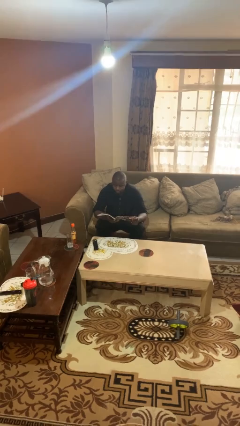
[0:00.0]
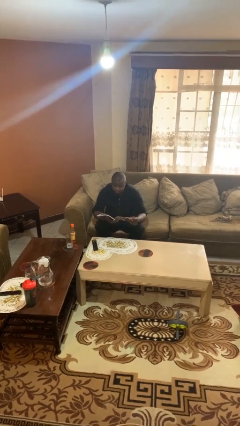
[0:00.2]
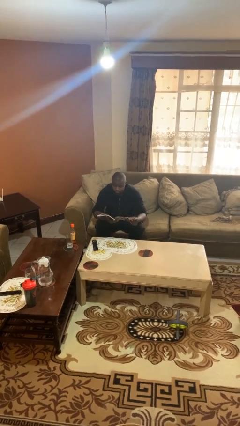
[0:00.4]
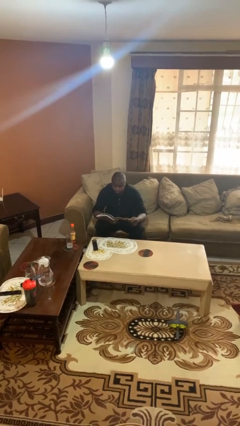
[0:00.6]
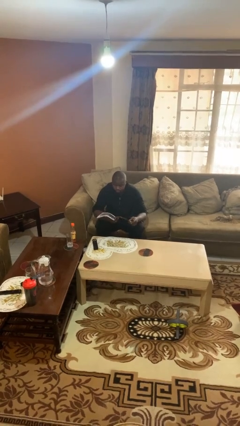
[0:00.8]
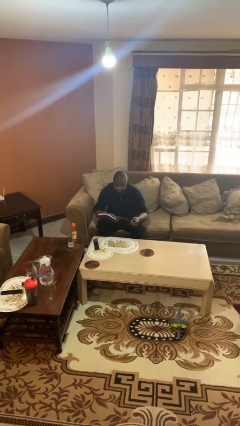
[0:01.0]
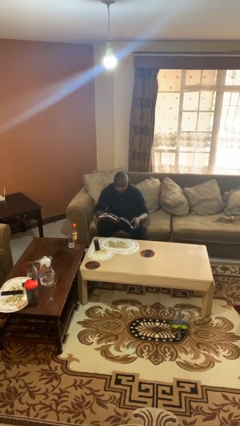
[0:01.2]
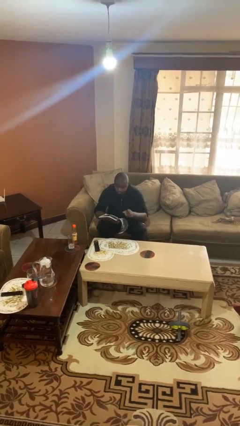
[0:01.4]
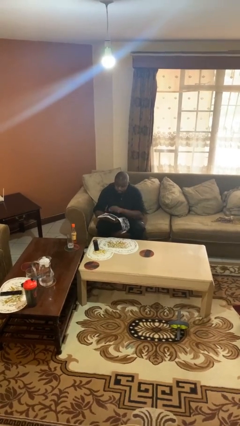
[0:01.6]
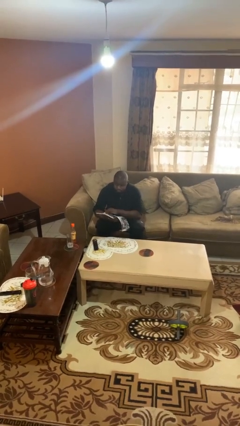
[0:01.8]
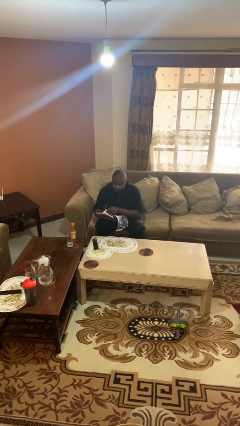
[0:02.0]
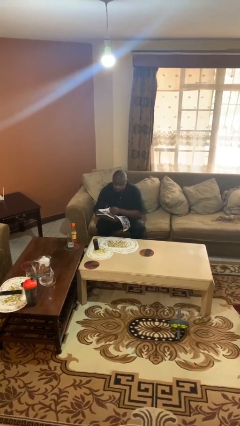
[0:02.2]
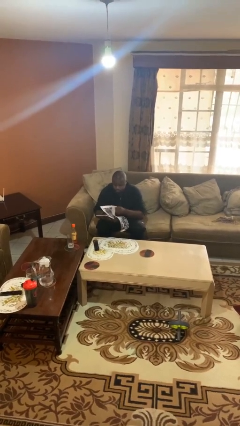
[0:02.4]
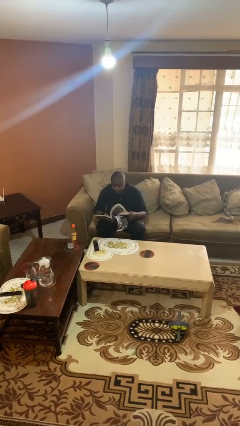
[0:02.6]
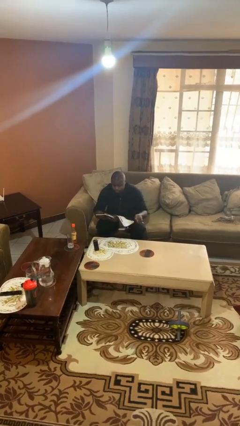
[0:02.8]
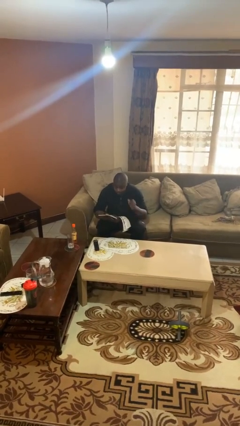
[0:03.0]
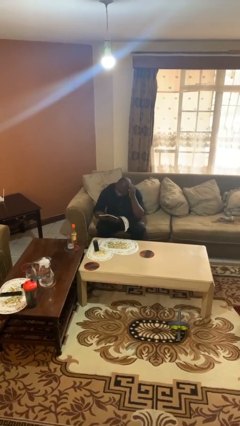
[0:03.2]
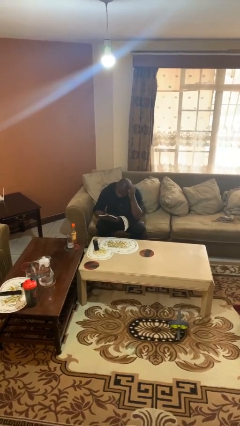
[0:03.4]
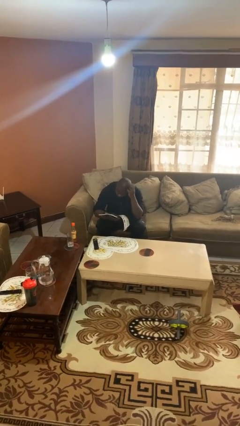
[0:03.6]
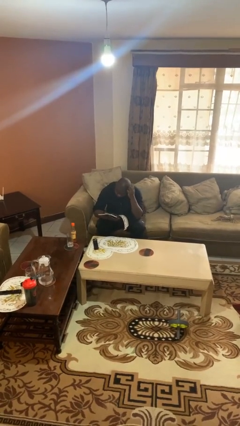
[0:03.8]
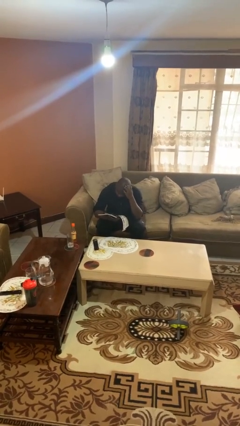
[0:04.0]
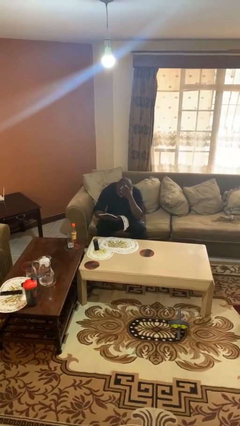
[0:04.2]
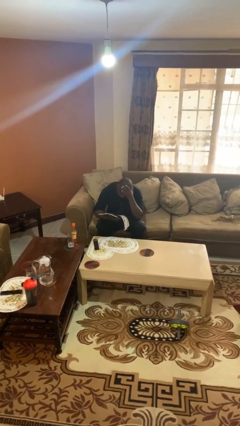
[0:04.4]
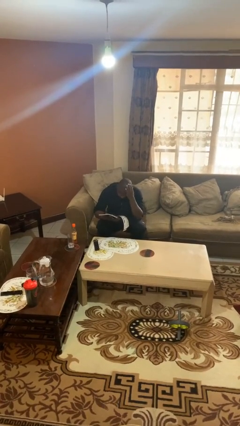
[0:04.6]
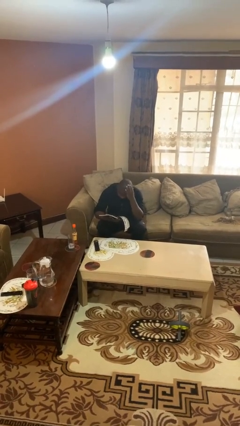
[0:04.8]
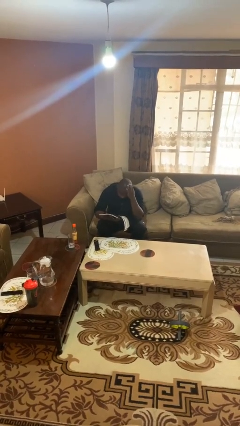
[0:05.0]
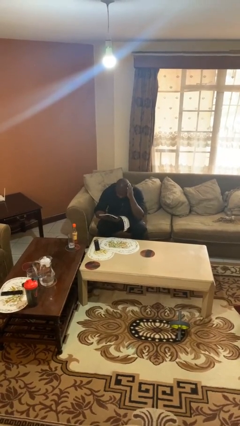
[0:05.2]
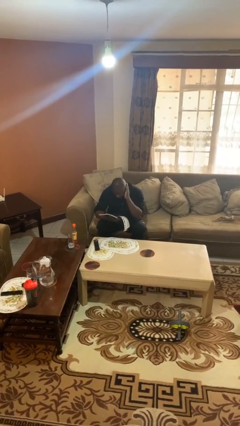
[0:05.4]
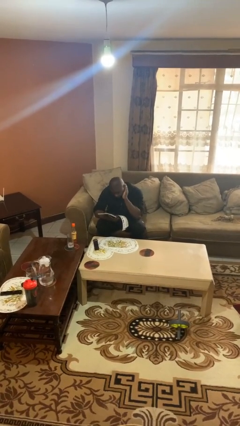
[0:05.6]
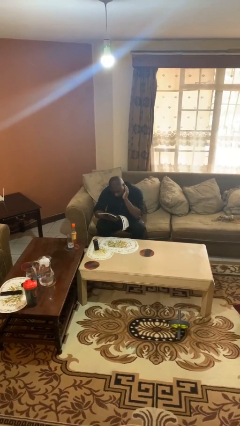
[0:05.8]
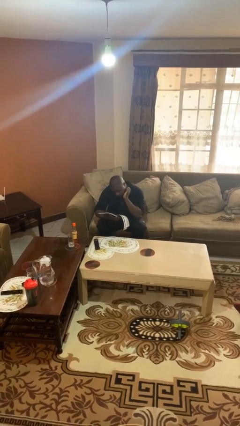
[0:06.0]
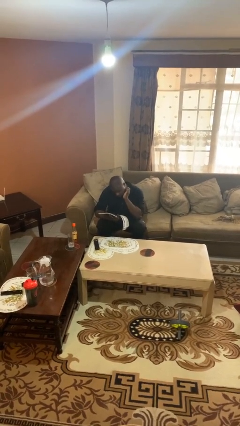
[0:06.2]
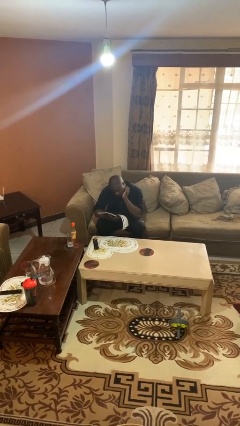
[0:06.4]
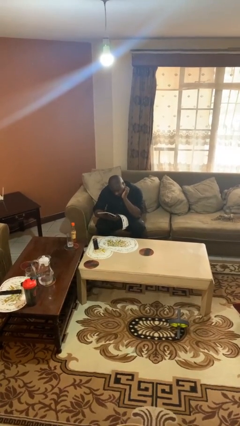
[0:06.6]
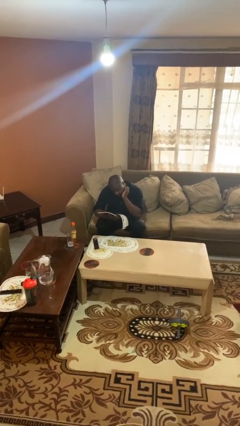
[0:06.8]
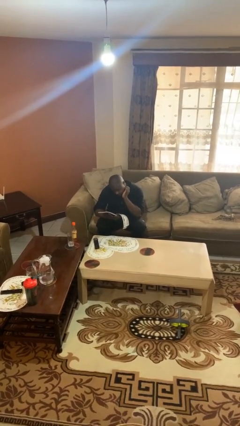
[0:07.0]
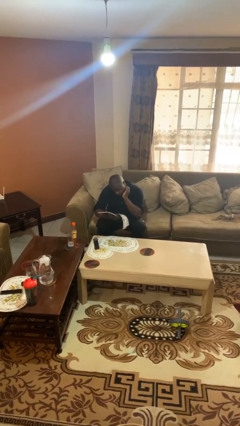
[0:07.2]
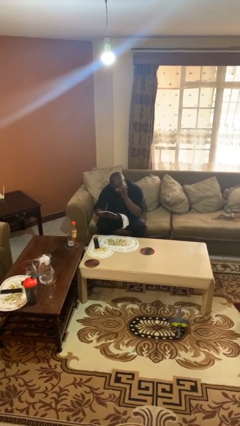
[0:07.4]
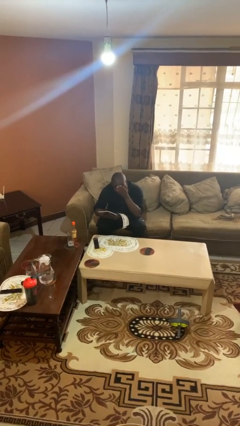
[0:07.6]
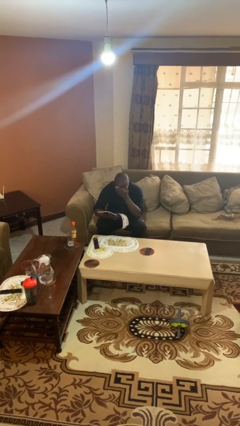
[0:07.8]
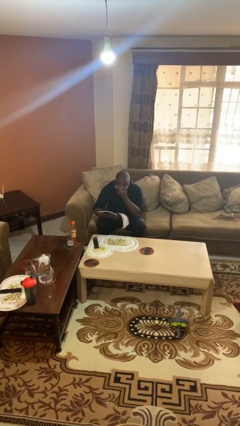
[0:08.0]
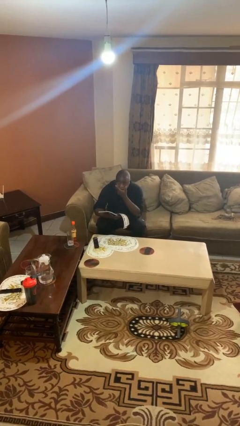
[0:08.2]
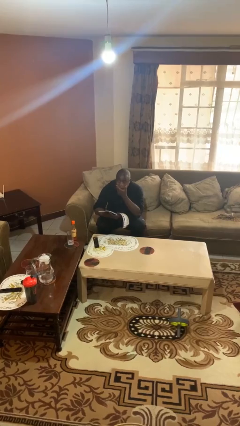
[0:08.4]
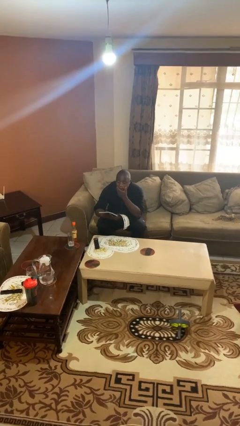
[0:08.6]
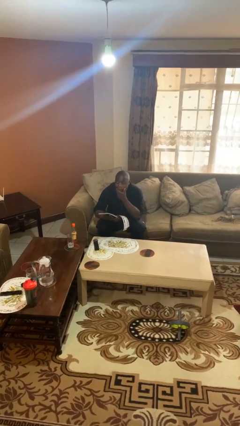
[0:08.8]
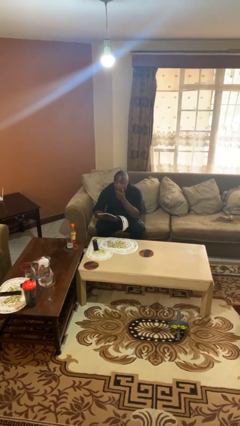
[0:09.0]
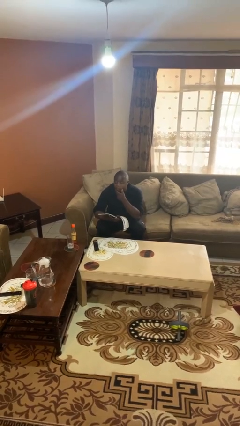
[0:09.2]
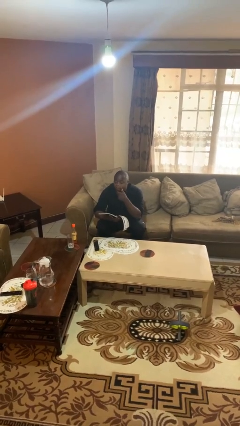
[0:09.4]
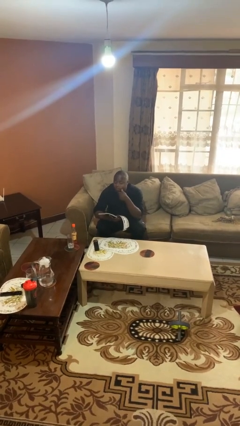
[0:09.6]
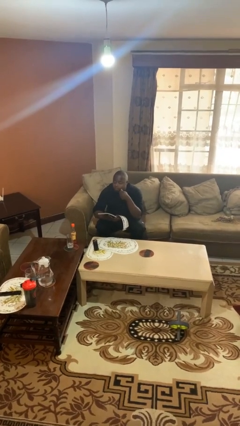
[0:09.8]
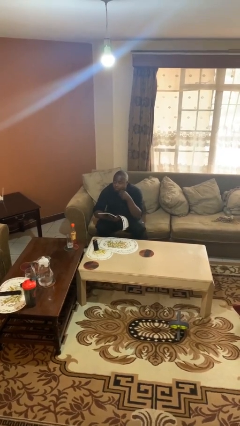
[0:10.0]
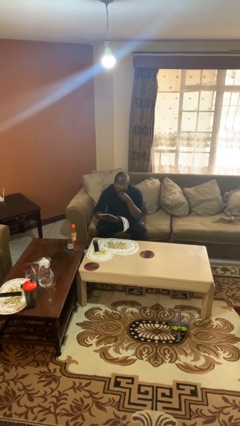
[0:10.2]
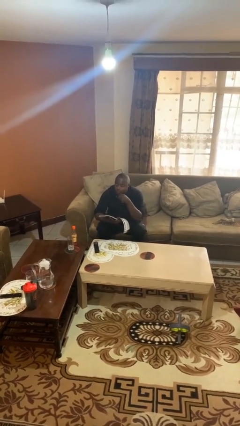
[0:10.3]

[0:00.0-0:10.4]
person reads document

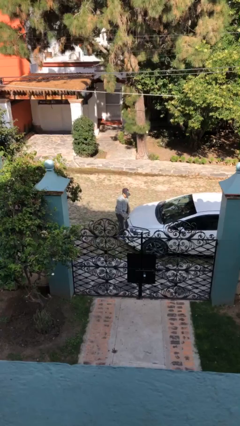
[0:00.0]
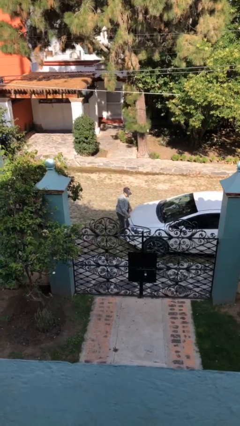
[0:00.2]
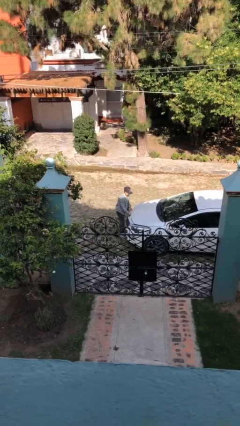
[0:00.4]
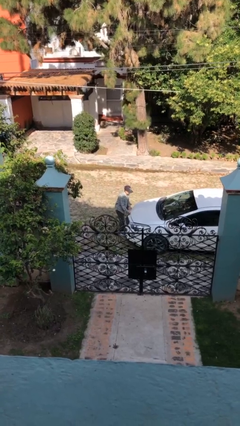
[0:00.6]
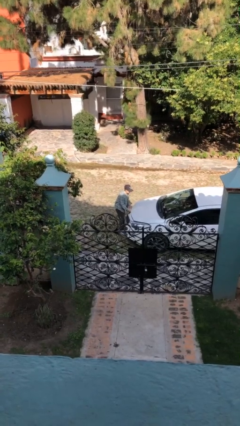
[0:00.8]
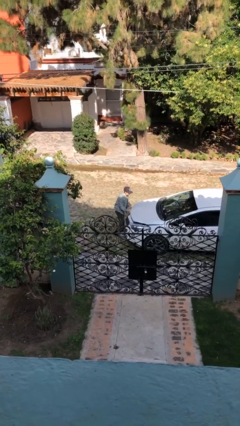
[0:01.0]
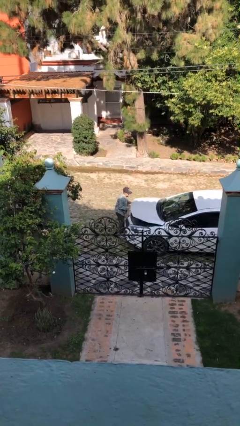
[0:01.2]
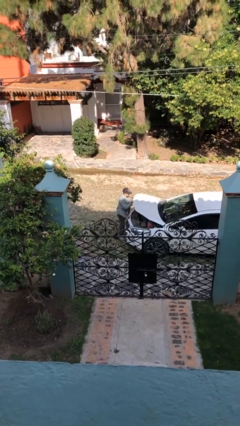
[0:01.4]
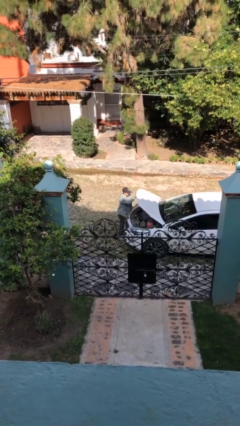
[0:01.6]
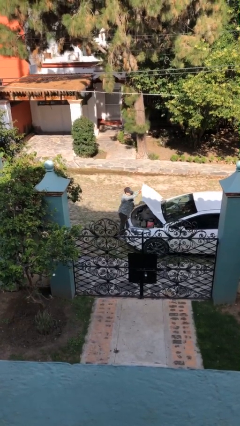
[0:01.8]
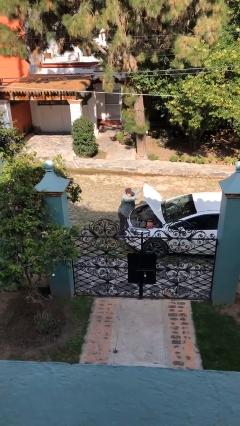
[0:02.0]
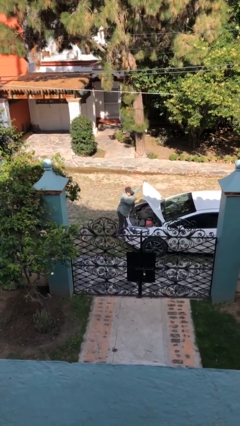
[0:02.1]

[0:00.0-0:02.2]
person opens car hood

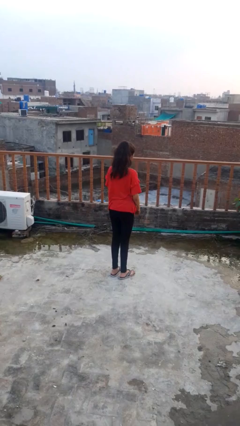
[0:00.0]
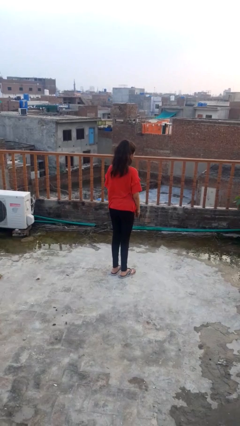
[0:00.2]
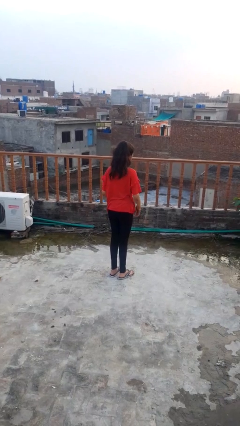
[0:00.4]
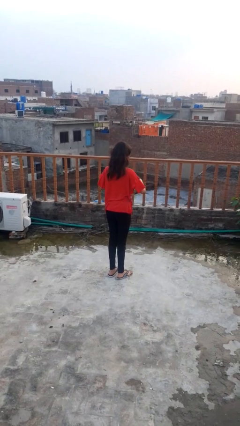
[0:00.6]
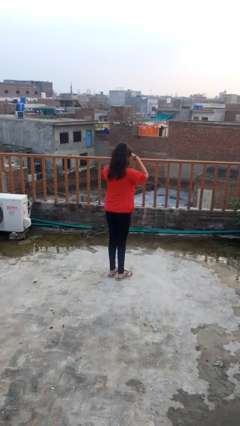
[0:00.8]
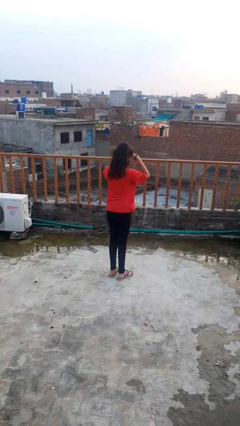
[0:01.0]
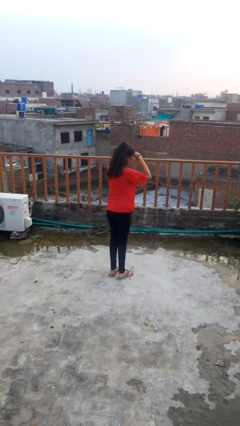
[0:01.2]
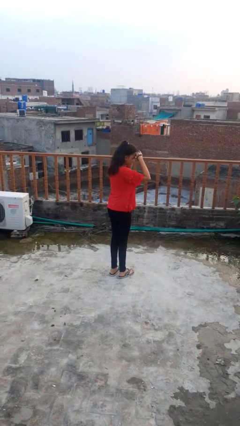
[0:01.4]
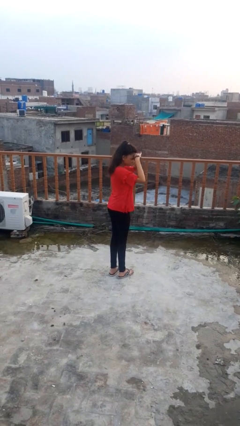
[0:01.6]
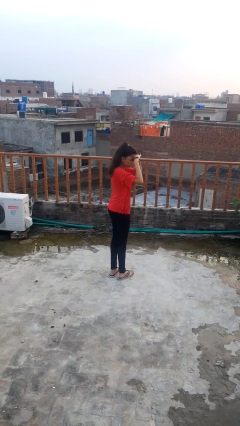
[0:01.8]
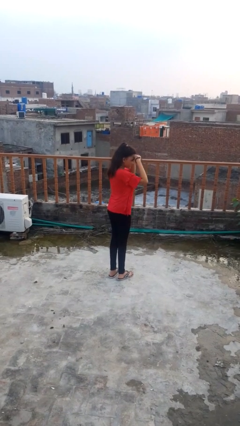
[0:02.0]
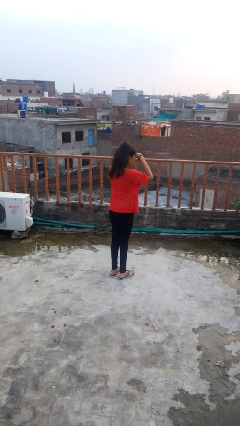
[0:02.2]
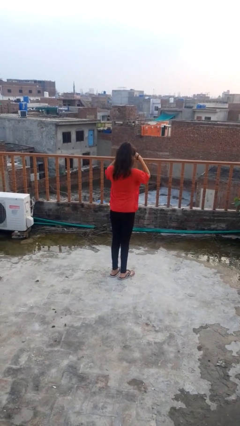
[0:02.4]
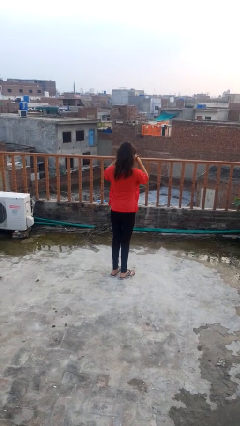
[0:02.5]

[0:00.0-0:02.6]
person shades eyes

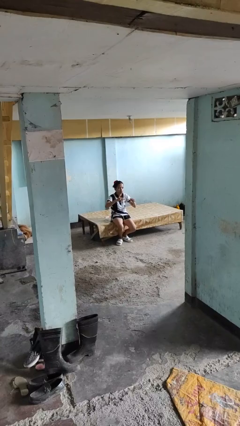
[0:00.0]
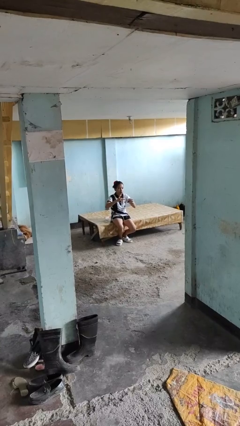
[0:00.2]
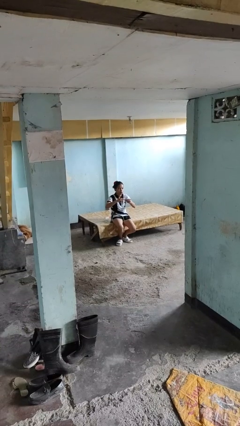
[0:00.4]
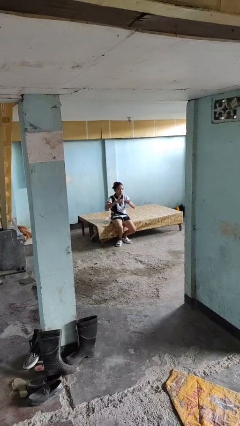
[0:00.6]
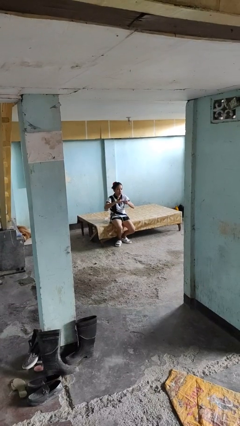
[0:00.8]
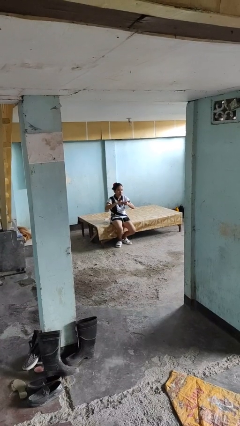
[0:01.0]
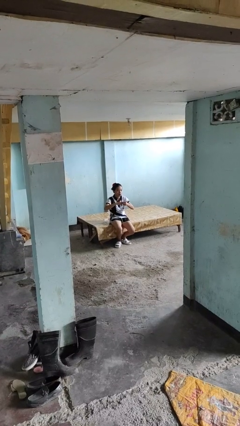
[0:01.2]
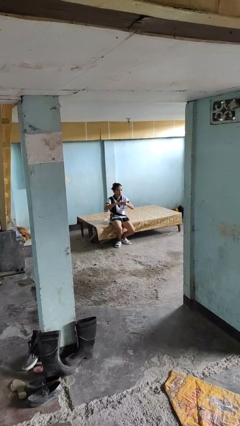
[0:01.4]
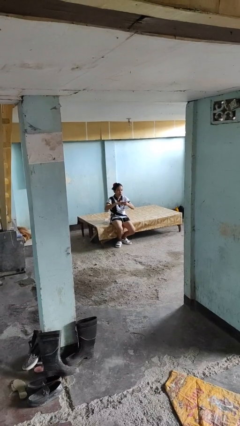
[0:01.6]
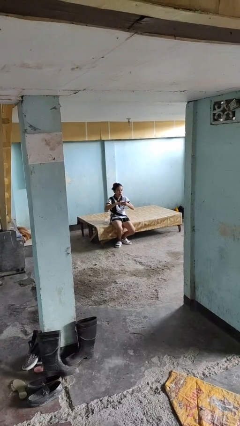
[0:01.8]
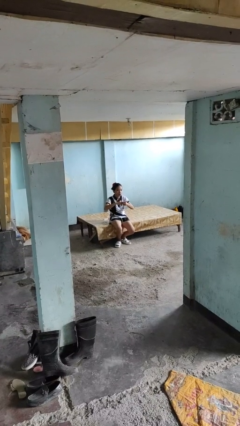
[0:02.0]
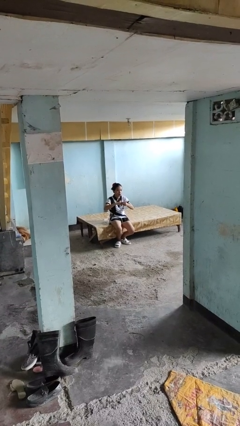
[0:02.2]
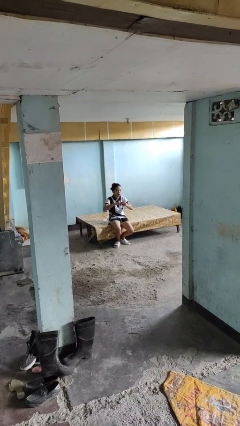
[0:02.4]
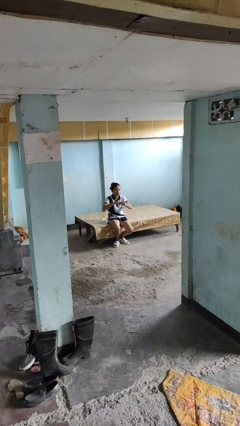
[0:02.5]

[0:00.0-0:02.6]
person puts on ring
